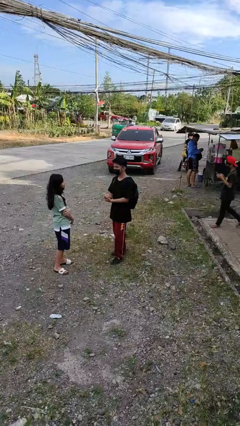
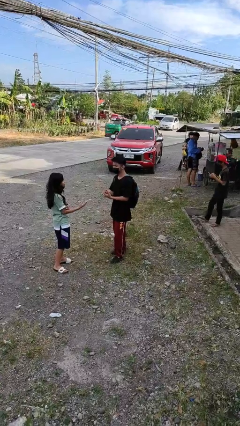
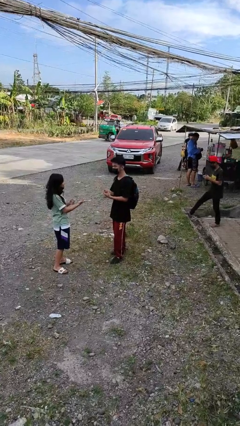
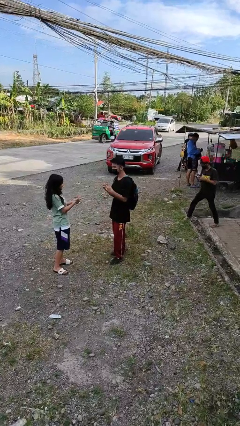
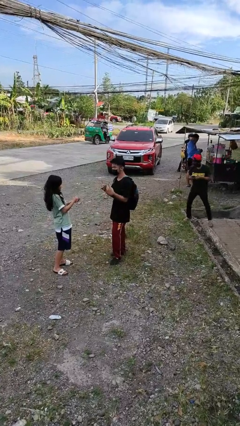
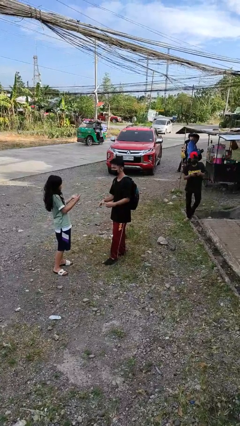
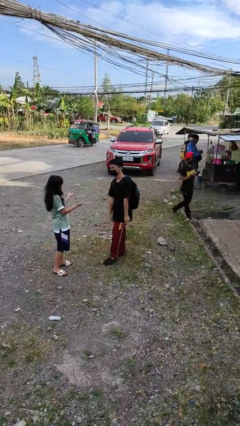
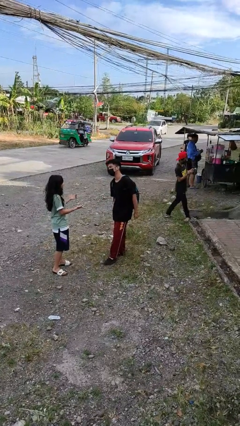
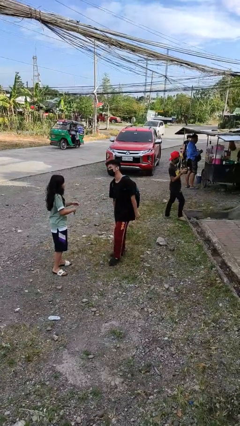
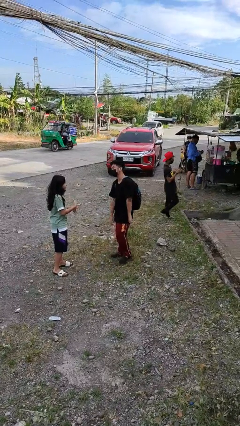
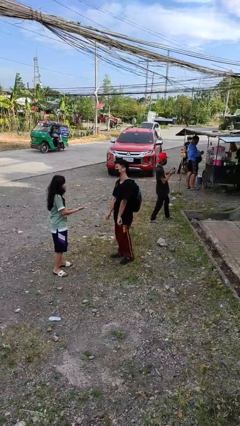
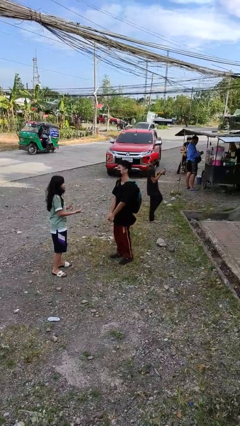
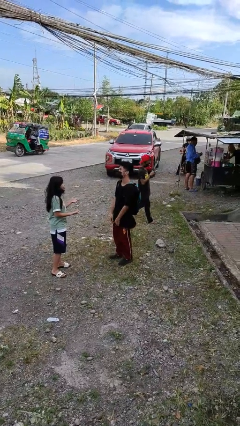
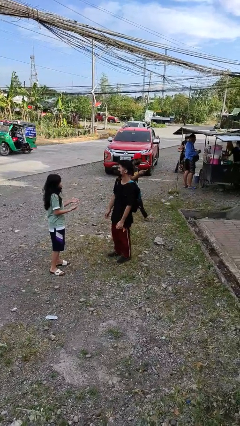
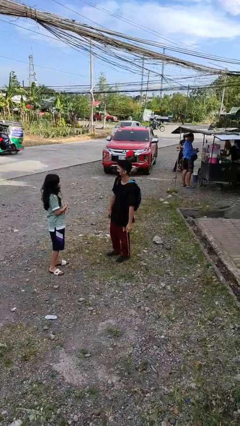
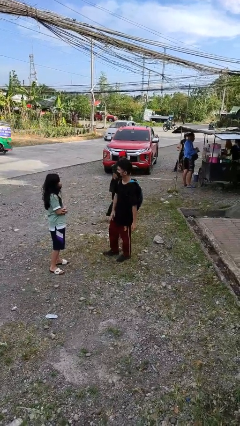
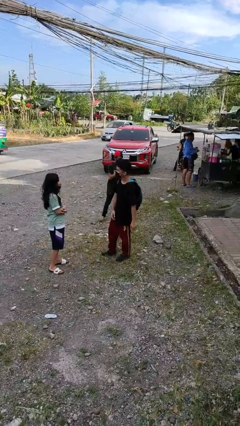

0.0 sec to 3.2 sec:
person talks to person

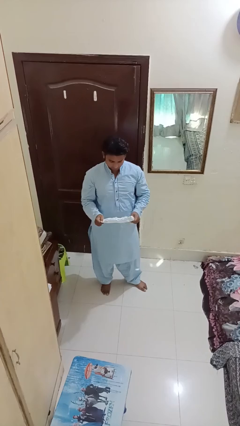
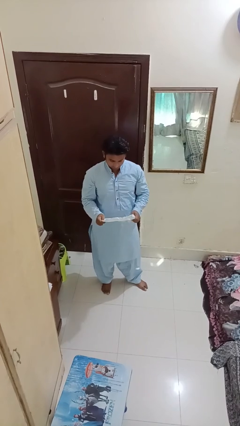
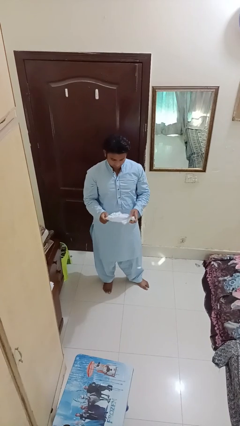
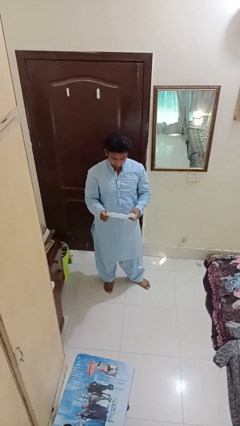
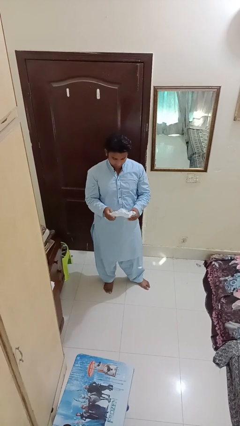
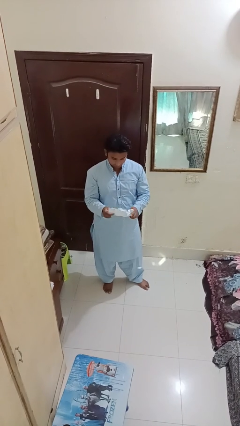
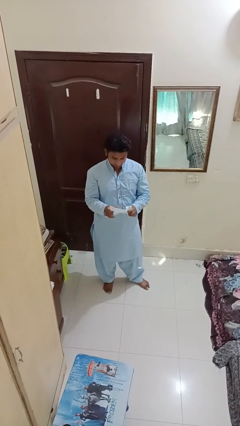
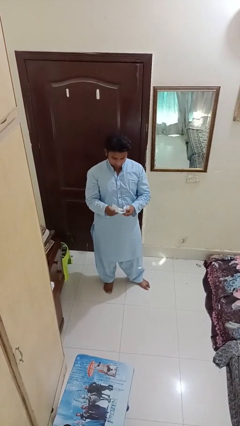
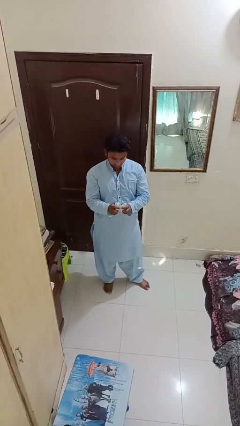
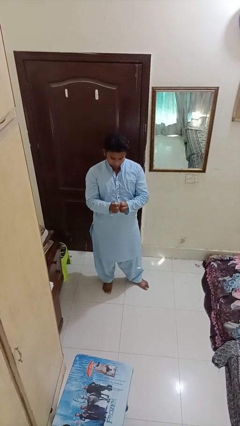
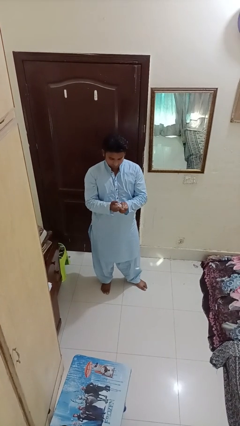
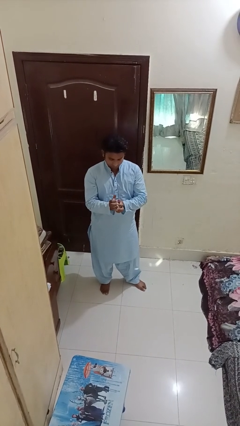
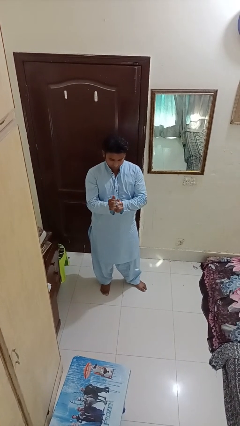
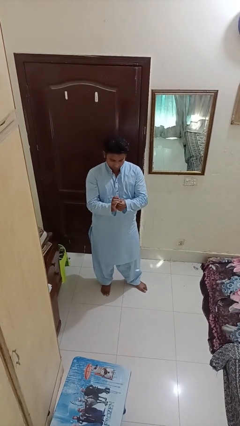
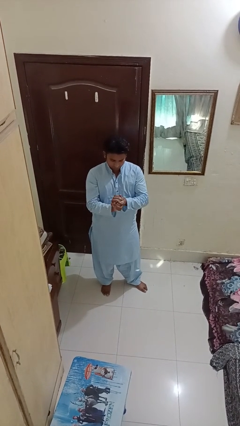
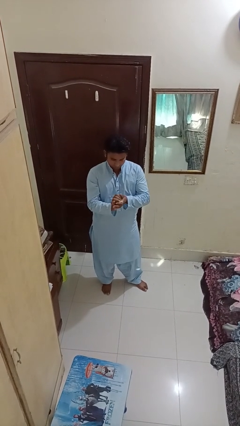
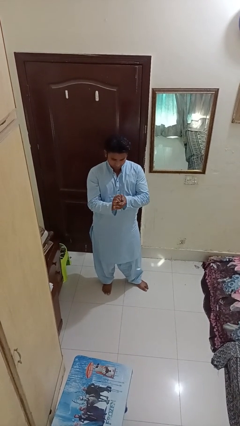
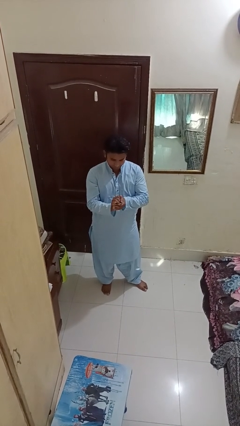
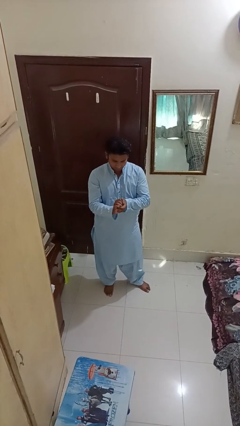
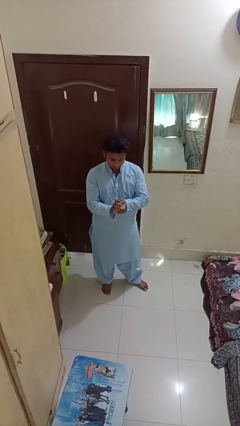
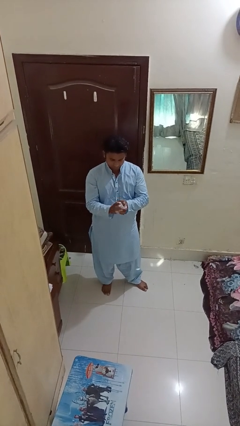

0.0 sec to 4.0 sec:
person crumples paper

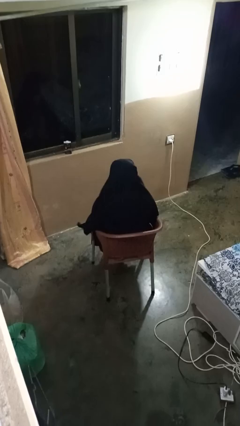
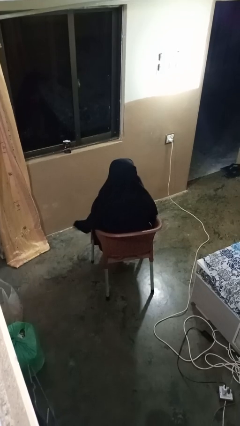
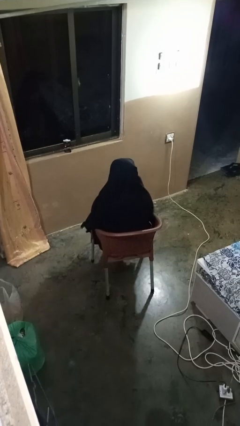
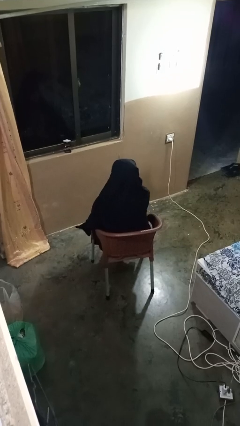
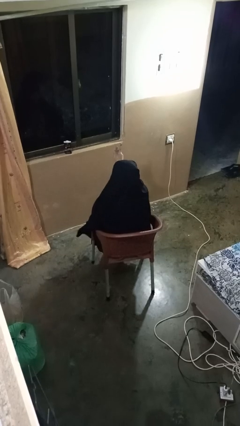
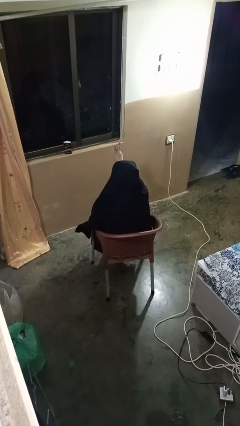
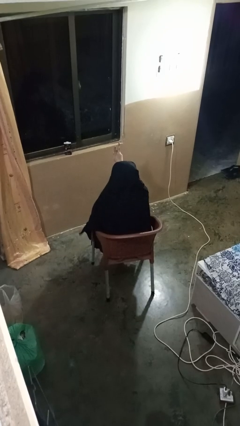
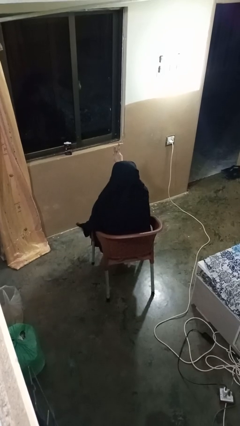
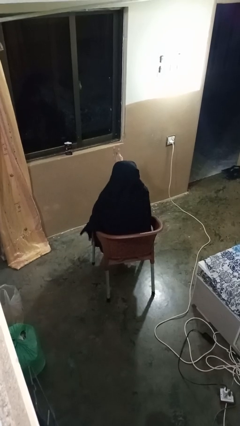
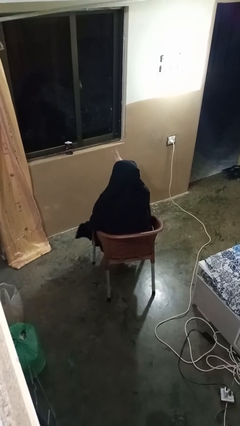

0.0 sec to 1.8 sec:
person gestures peace

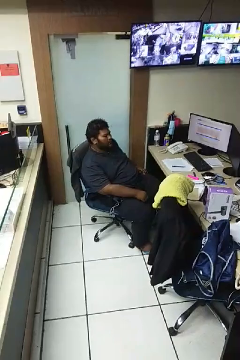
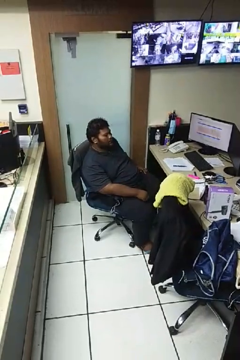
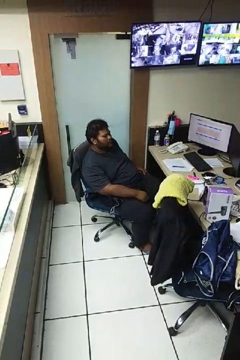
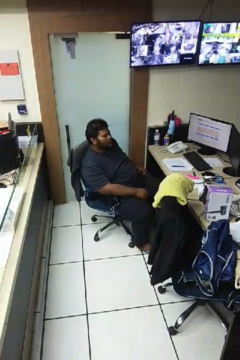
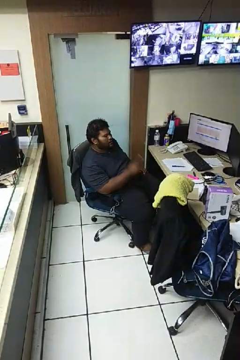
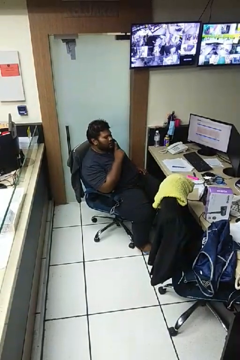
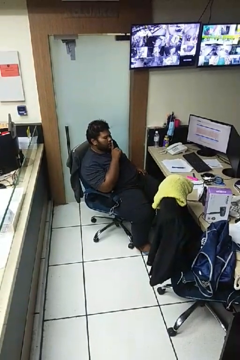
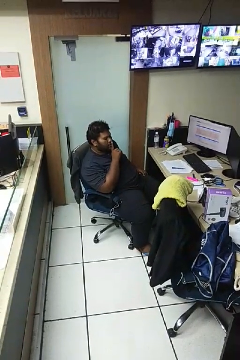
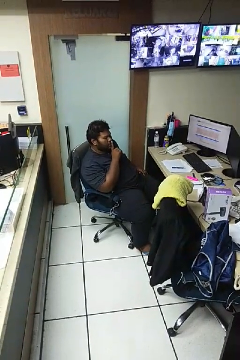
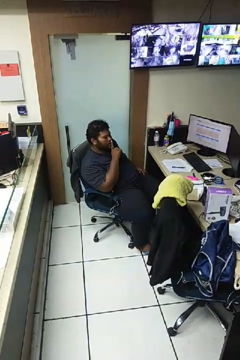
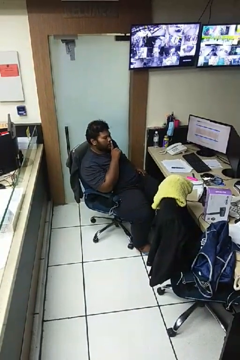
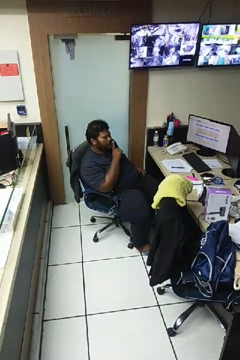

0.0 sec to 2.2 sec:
person gestures be quiet

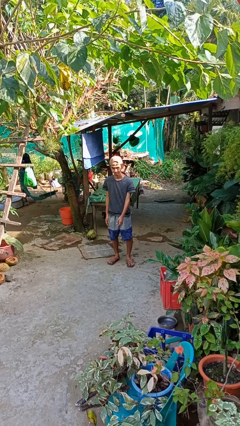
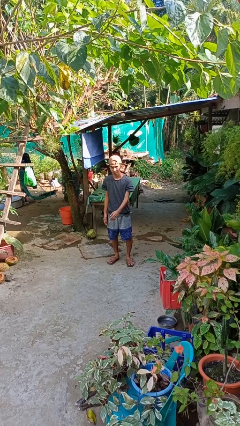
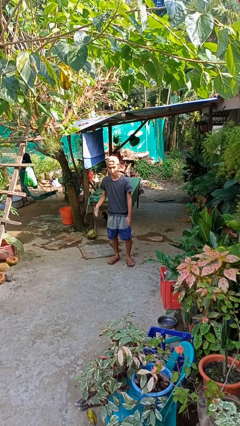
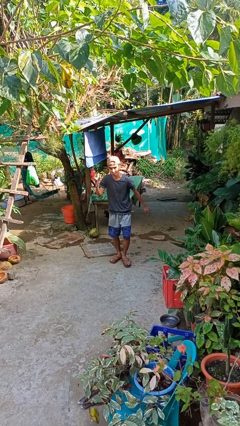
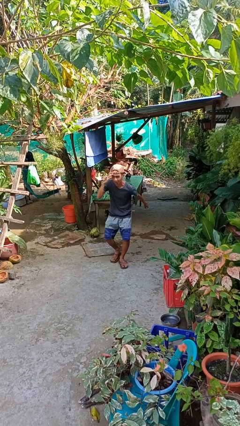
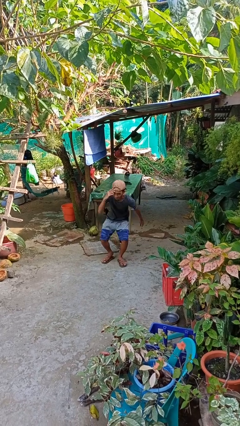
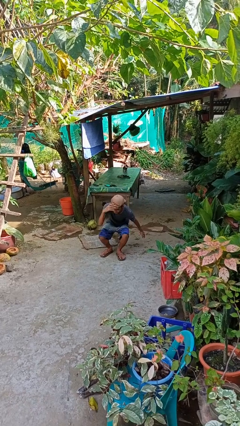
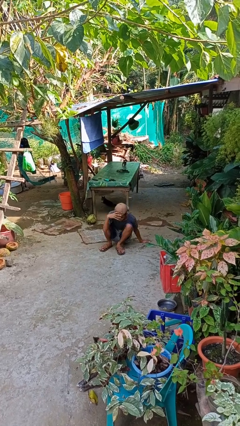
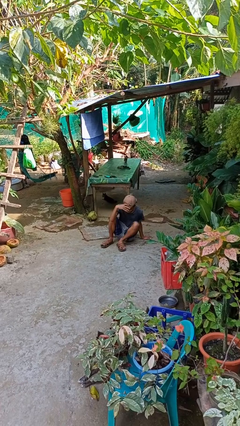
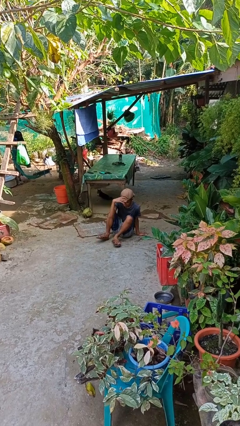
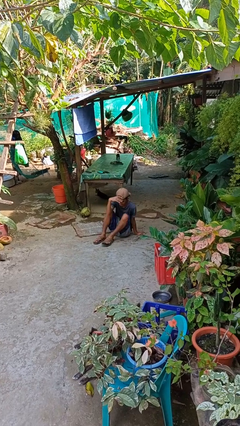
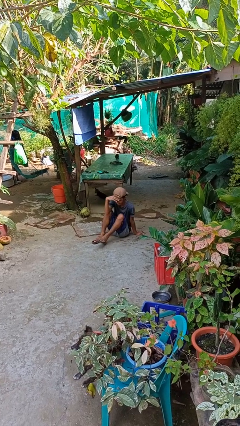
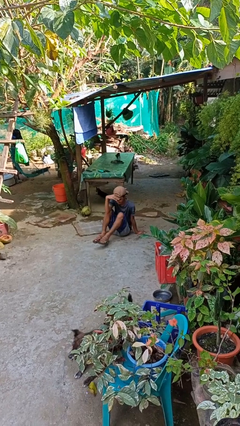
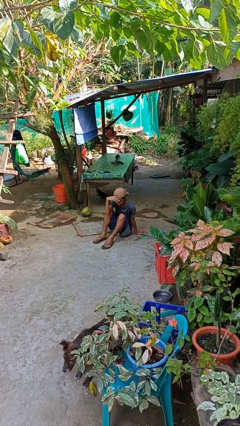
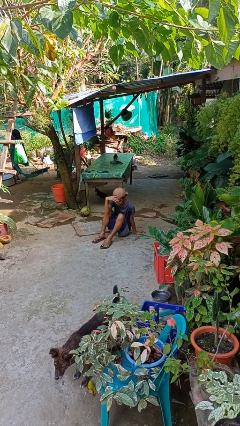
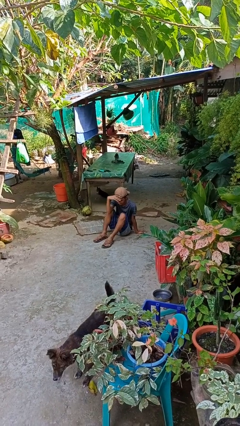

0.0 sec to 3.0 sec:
person falls while standing

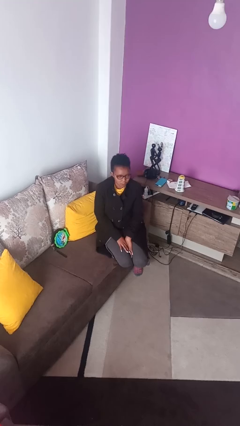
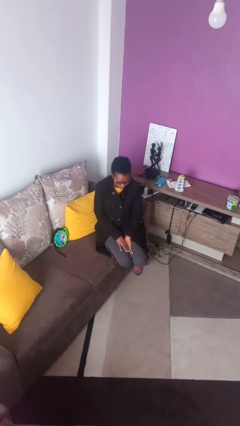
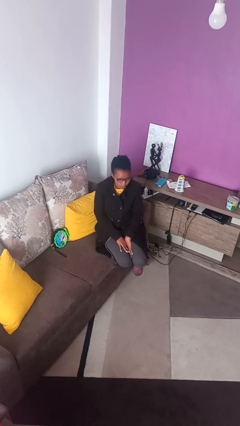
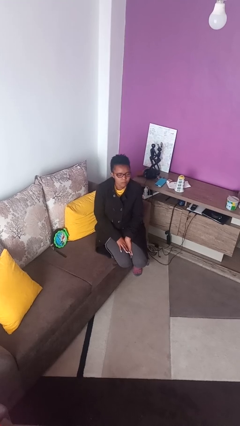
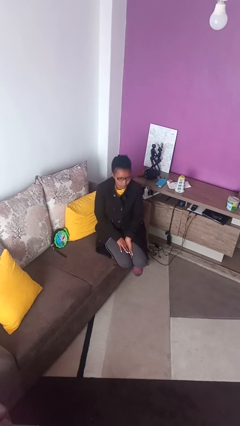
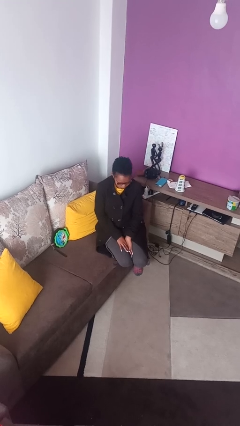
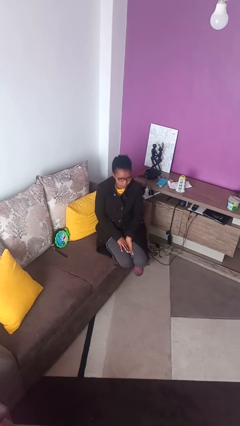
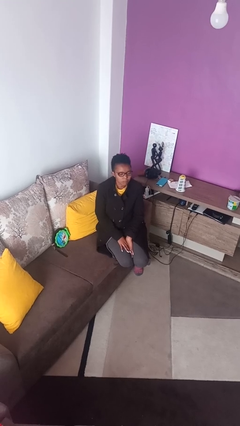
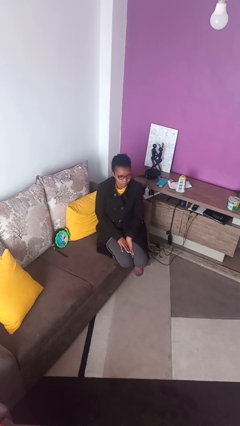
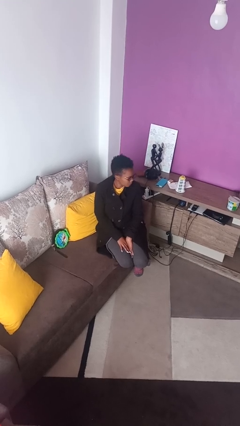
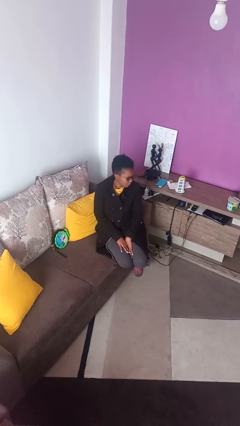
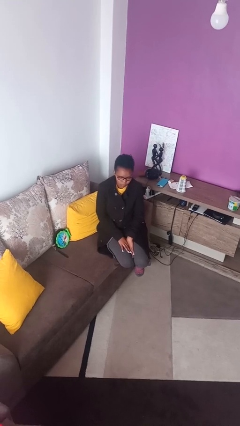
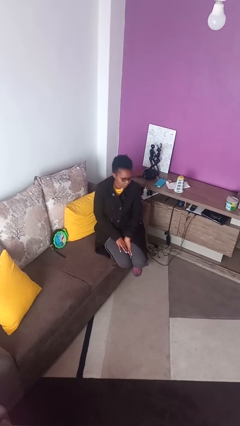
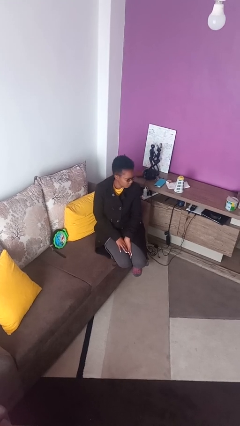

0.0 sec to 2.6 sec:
person nods head

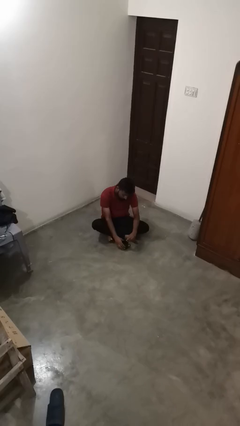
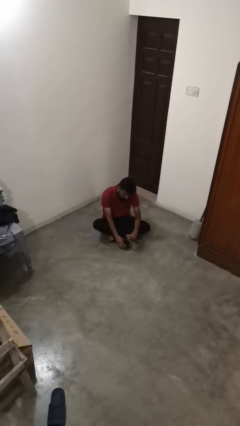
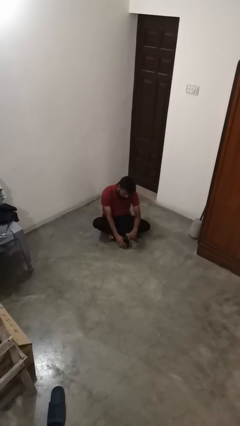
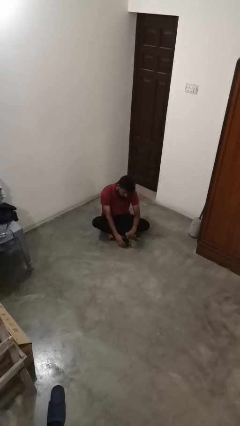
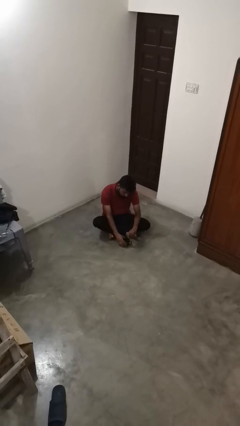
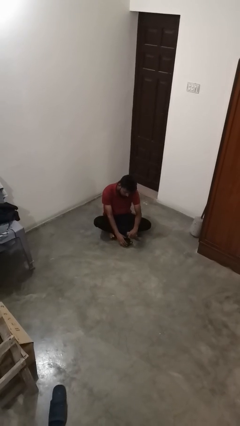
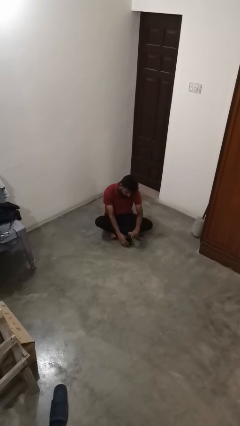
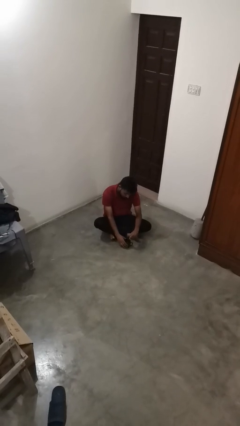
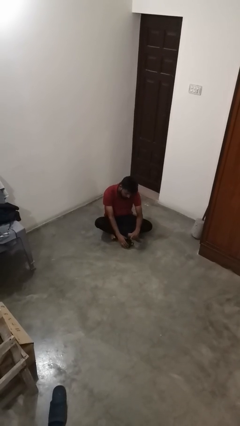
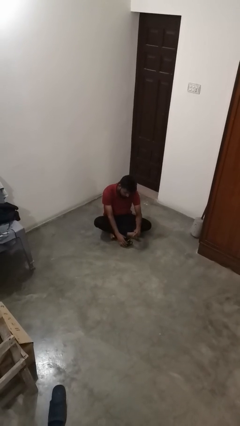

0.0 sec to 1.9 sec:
person stirs mug
